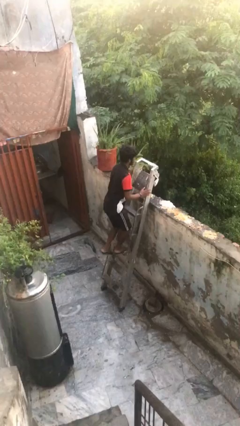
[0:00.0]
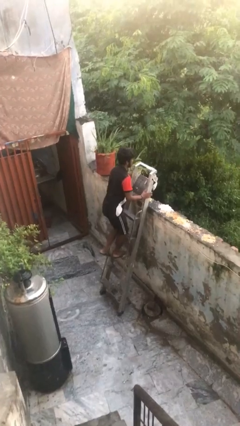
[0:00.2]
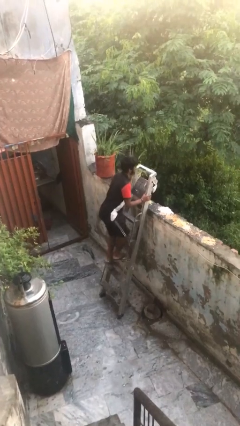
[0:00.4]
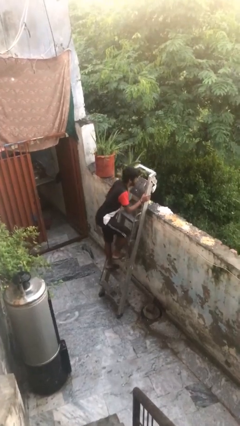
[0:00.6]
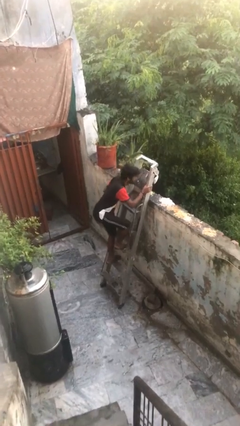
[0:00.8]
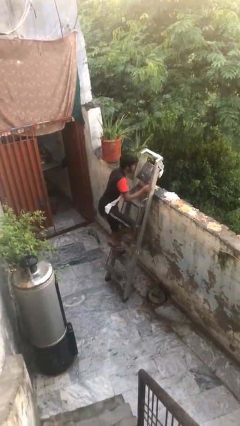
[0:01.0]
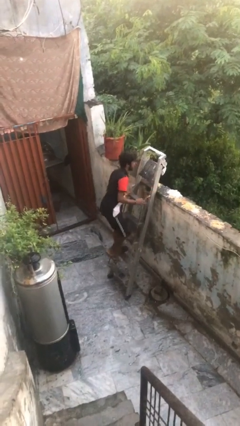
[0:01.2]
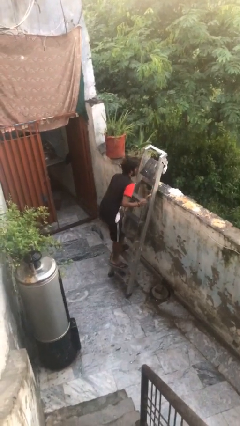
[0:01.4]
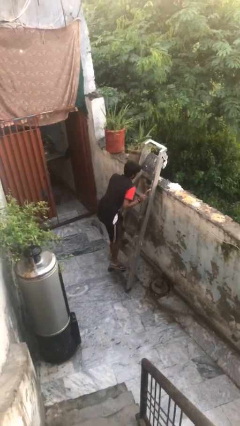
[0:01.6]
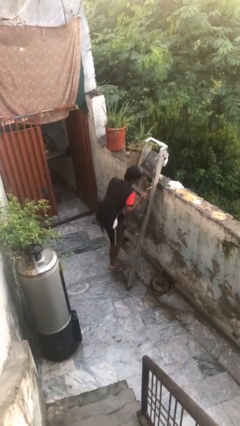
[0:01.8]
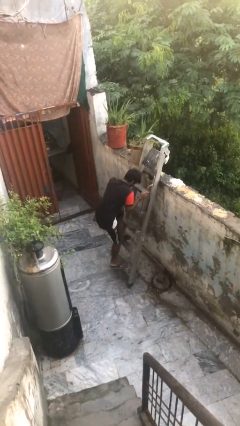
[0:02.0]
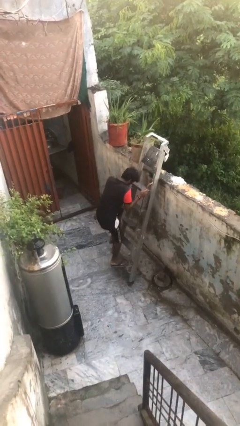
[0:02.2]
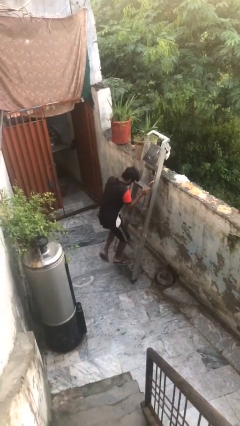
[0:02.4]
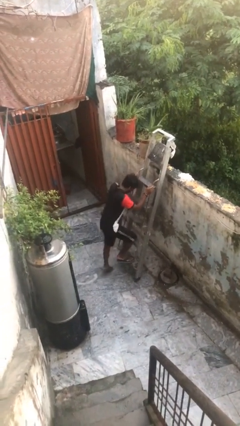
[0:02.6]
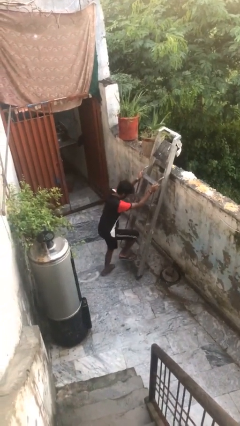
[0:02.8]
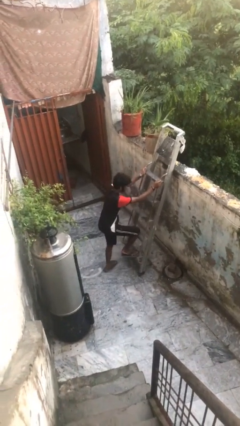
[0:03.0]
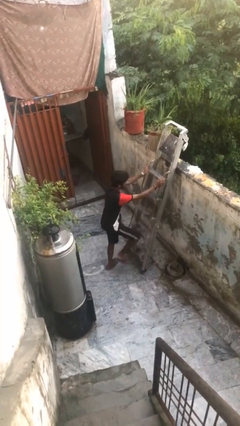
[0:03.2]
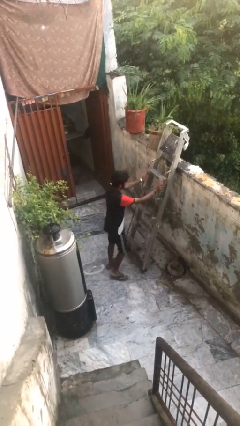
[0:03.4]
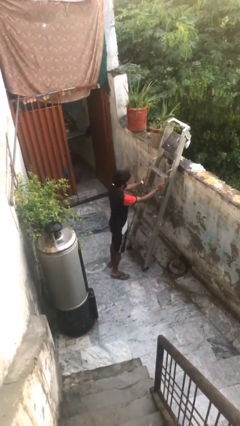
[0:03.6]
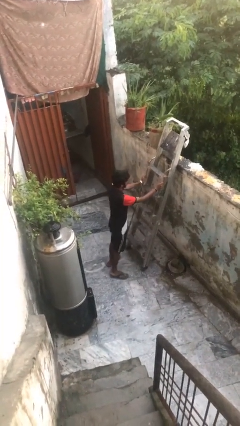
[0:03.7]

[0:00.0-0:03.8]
person climbs down ladder

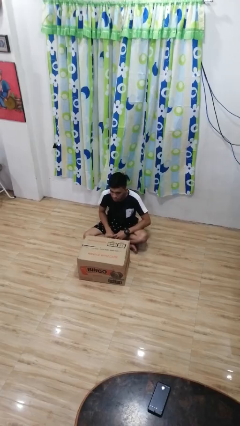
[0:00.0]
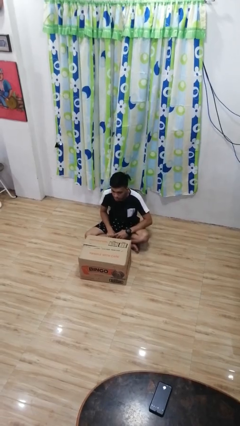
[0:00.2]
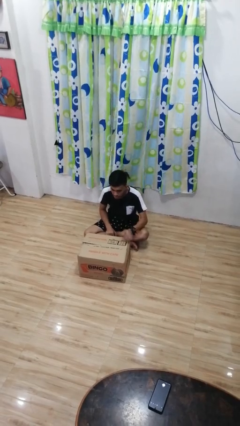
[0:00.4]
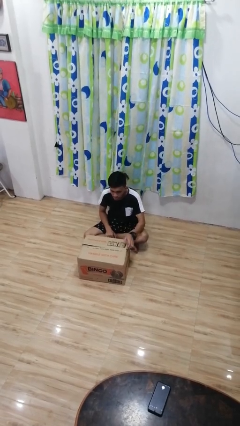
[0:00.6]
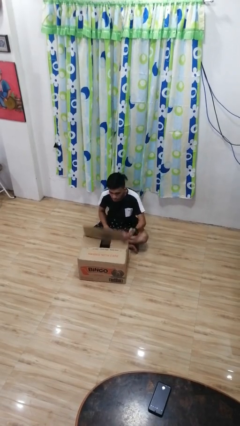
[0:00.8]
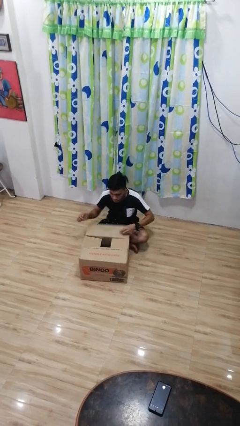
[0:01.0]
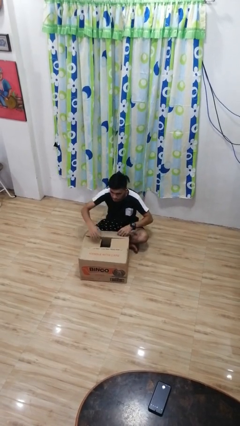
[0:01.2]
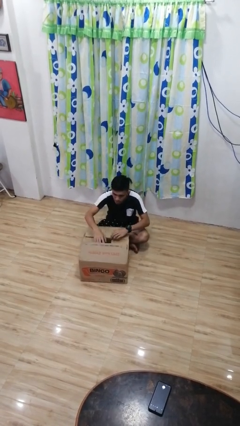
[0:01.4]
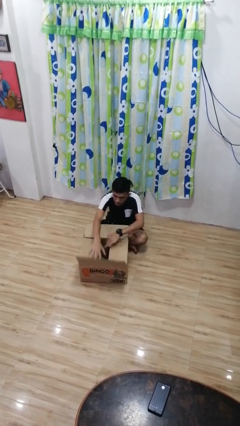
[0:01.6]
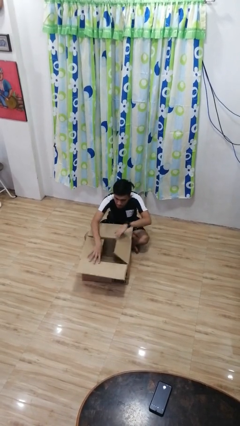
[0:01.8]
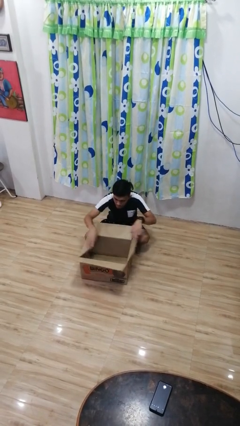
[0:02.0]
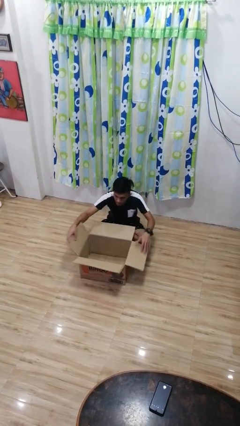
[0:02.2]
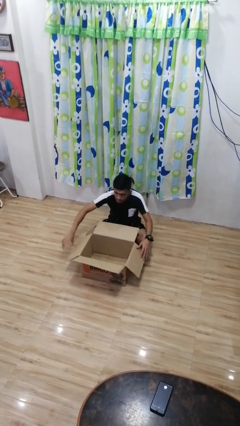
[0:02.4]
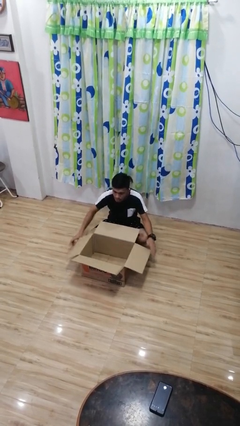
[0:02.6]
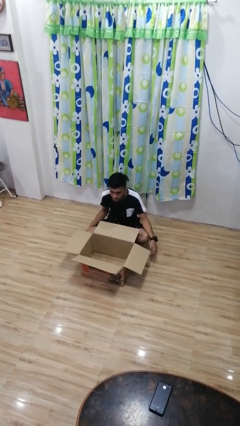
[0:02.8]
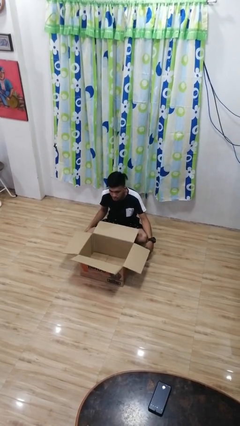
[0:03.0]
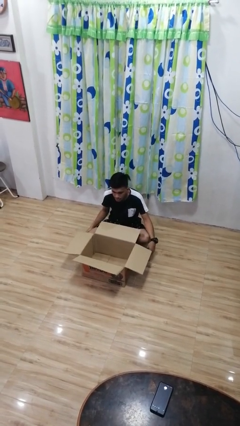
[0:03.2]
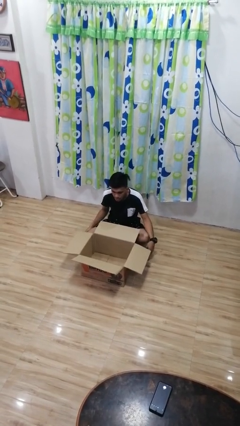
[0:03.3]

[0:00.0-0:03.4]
person opens box

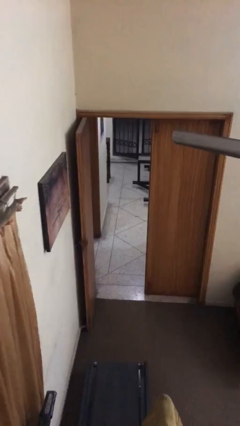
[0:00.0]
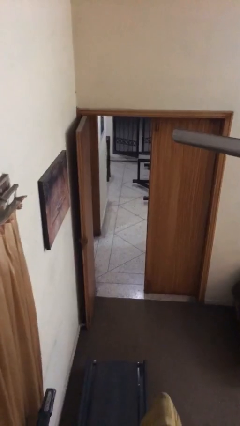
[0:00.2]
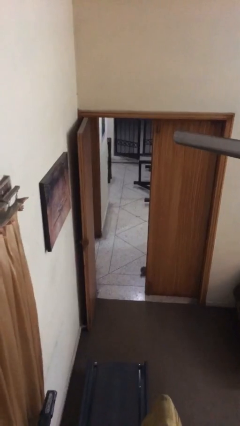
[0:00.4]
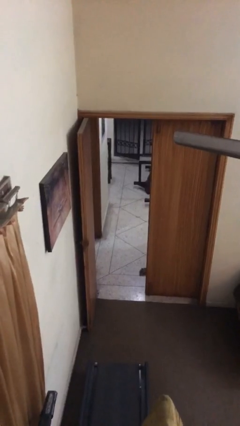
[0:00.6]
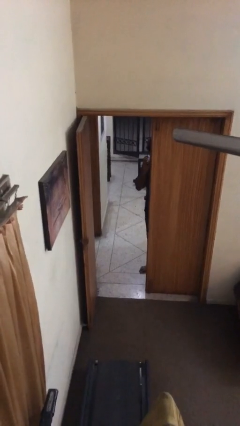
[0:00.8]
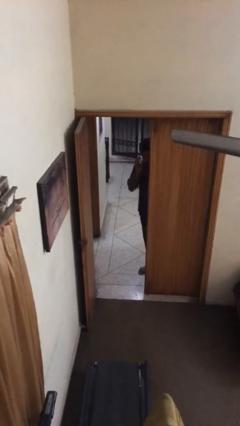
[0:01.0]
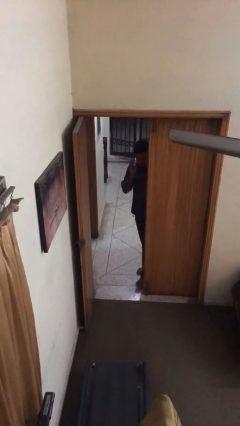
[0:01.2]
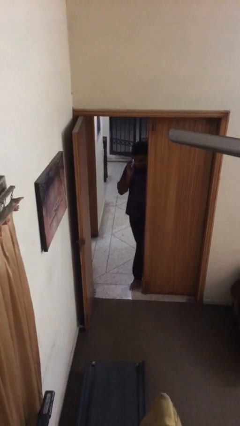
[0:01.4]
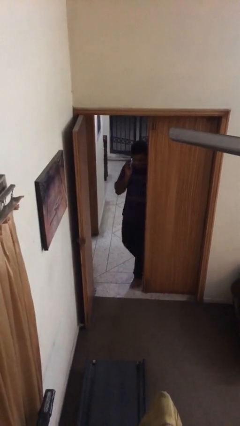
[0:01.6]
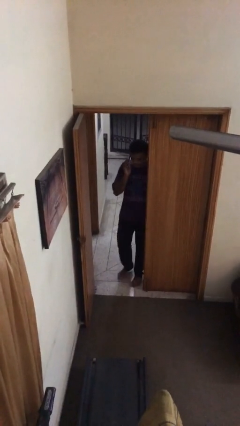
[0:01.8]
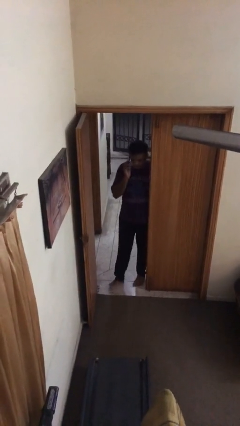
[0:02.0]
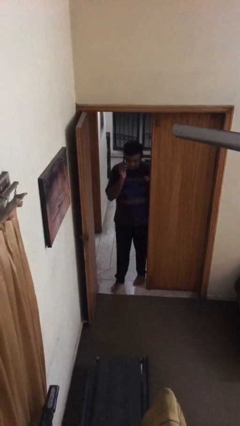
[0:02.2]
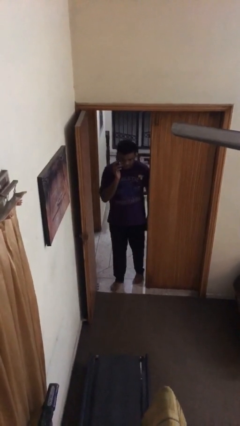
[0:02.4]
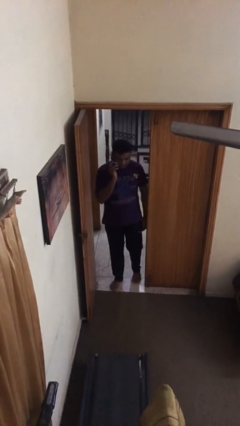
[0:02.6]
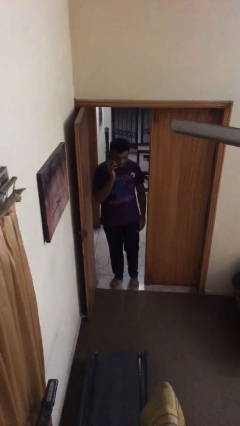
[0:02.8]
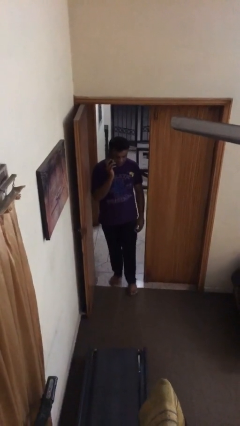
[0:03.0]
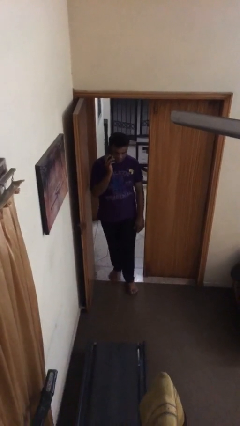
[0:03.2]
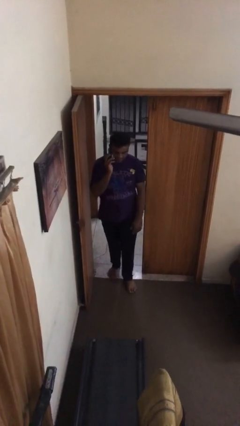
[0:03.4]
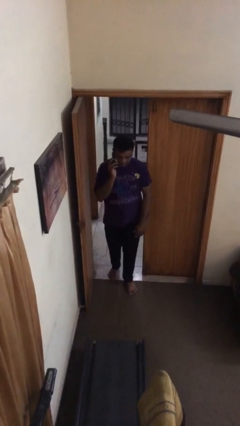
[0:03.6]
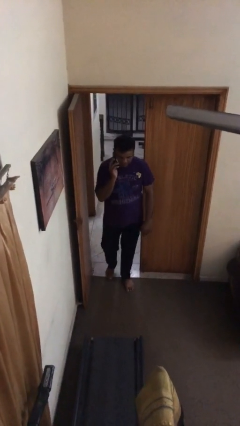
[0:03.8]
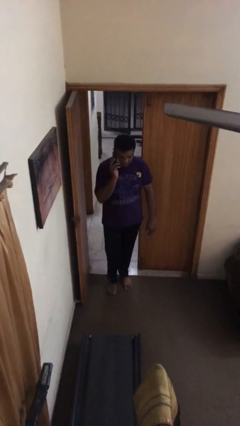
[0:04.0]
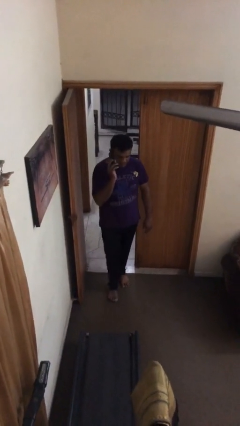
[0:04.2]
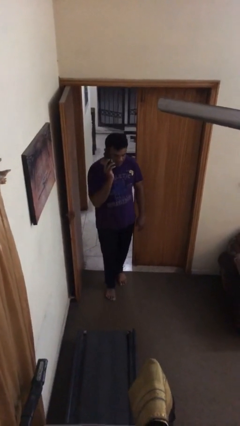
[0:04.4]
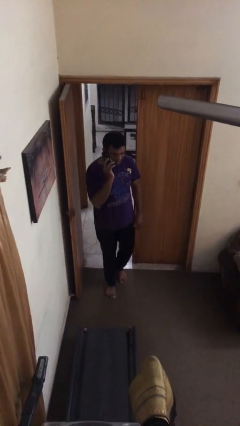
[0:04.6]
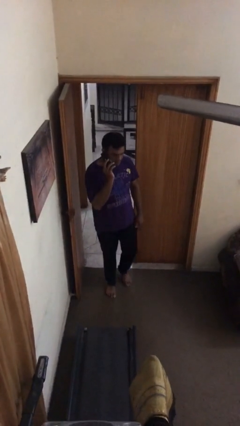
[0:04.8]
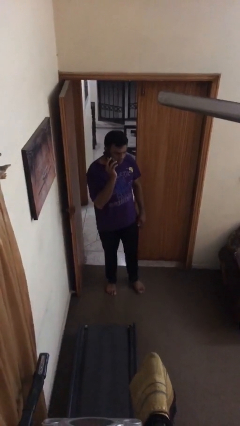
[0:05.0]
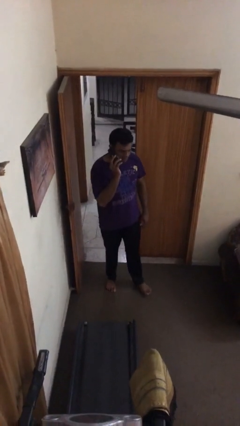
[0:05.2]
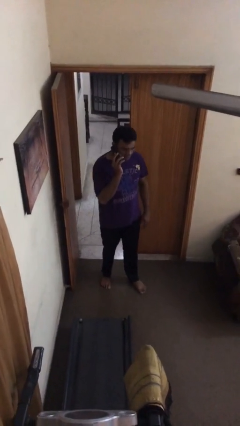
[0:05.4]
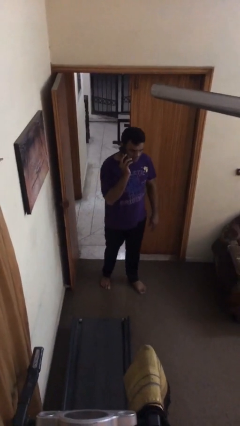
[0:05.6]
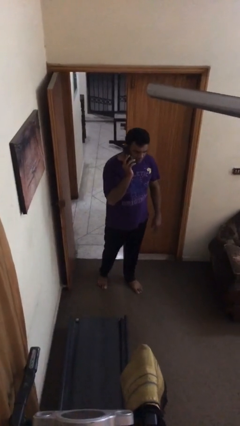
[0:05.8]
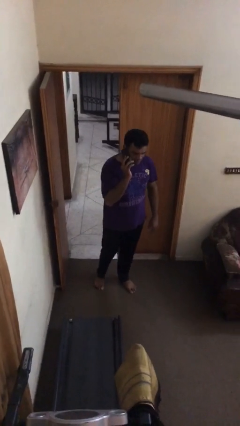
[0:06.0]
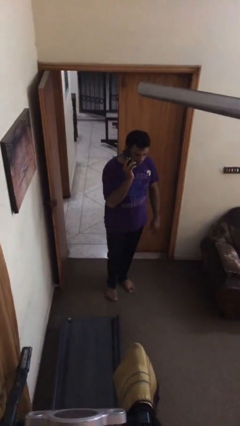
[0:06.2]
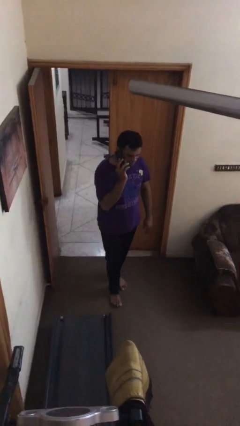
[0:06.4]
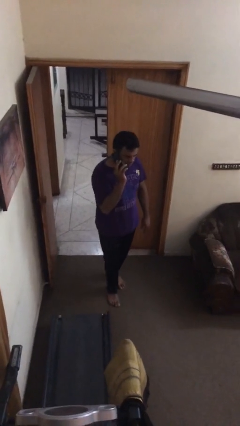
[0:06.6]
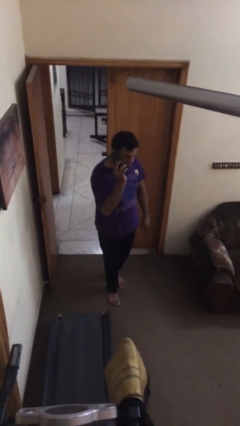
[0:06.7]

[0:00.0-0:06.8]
person enters scene through structure

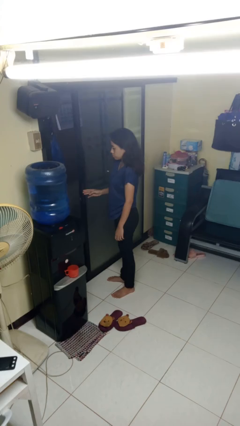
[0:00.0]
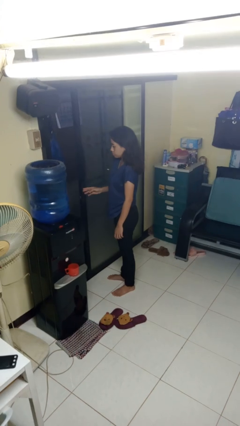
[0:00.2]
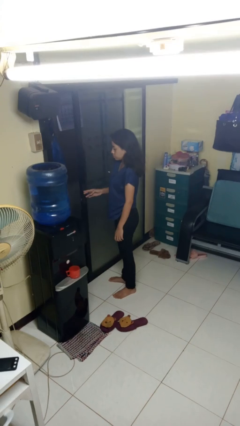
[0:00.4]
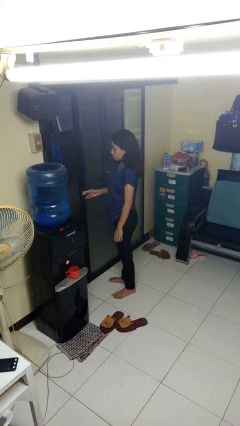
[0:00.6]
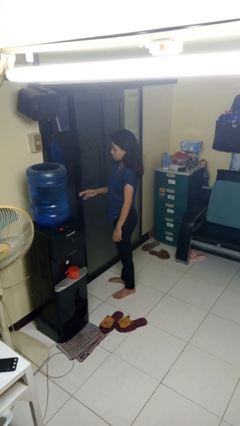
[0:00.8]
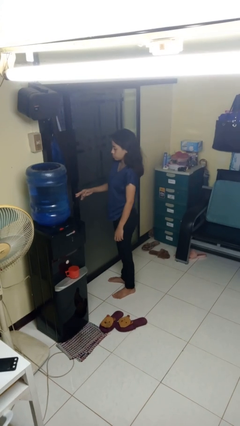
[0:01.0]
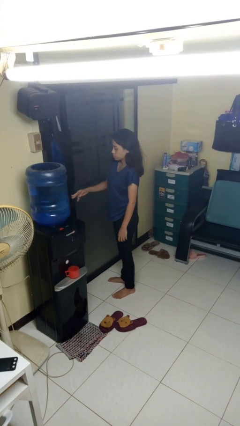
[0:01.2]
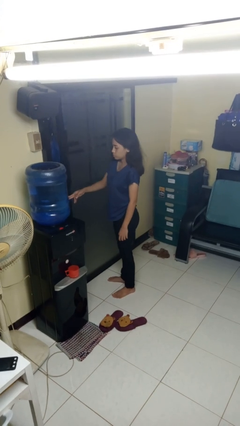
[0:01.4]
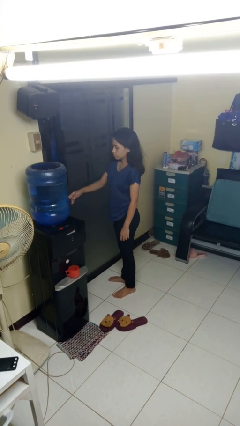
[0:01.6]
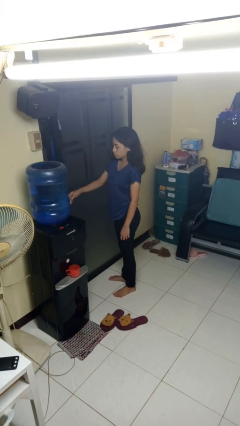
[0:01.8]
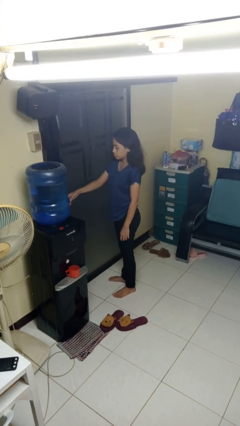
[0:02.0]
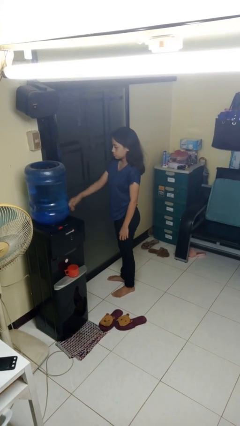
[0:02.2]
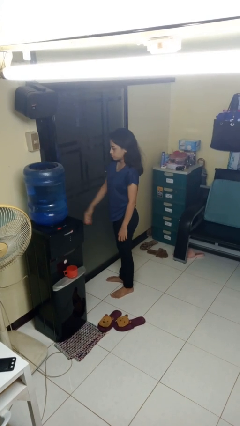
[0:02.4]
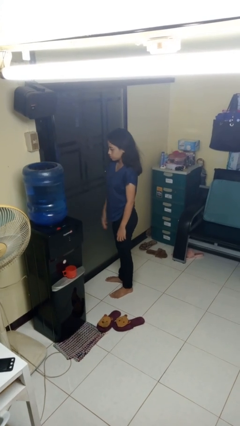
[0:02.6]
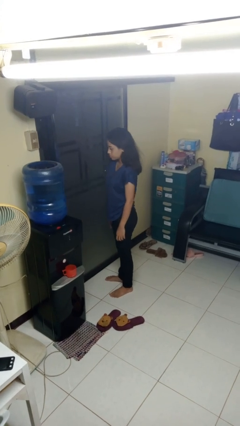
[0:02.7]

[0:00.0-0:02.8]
person closes sliding door

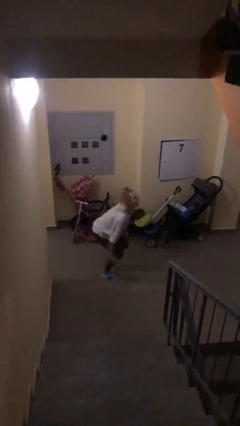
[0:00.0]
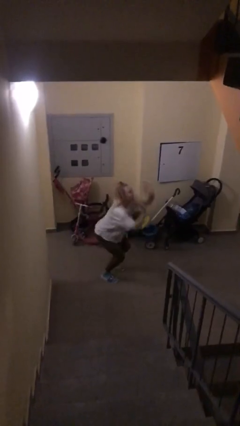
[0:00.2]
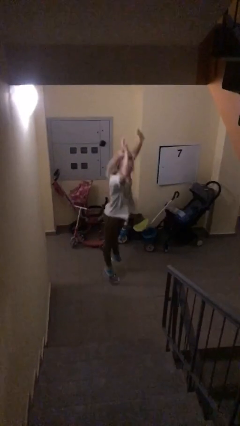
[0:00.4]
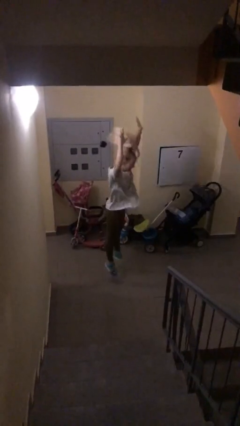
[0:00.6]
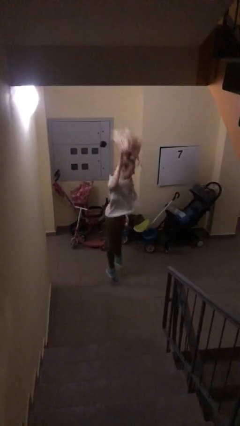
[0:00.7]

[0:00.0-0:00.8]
person jumps
